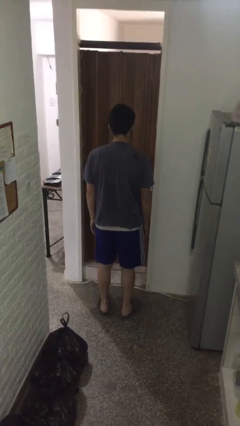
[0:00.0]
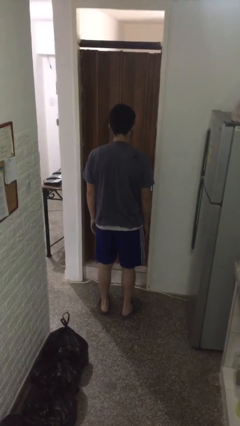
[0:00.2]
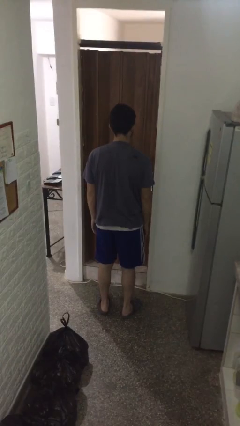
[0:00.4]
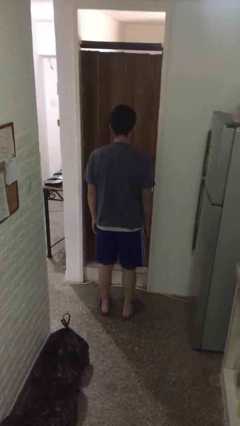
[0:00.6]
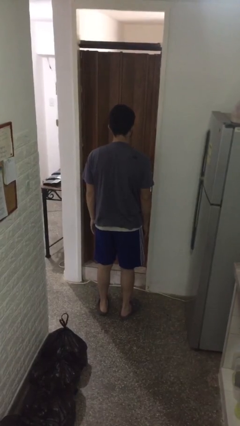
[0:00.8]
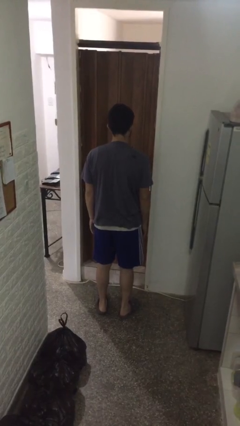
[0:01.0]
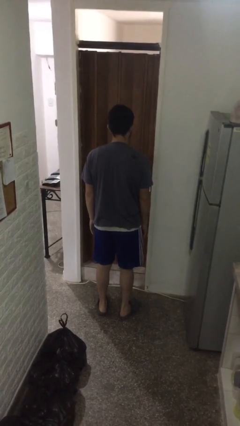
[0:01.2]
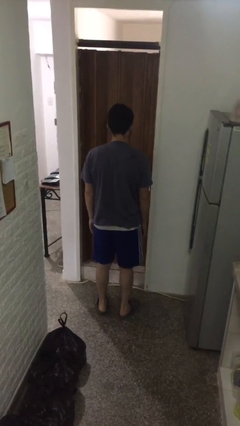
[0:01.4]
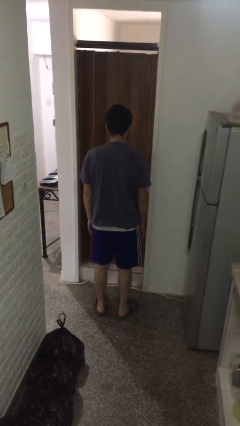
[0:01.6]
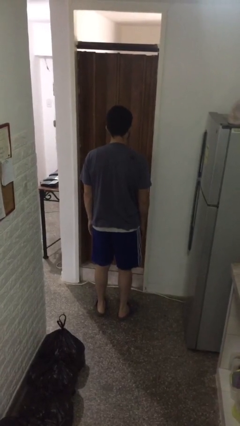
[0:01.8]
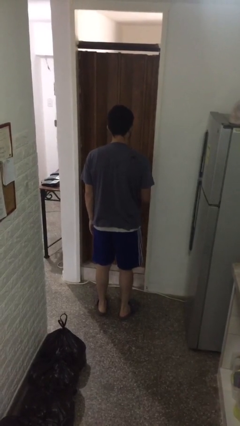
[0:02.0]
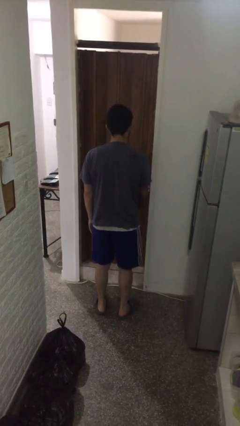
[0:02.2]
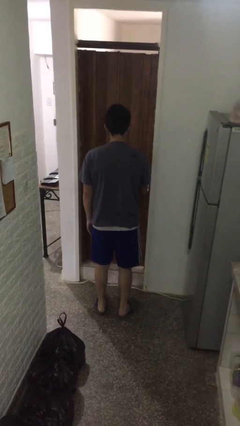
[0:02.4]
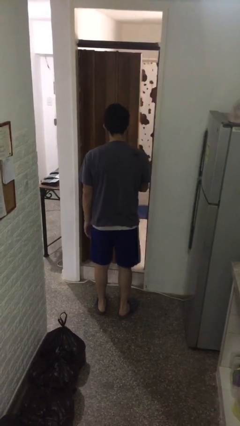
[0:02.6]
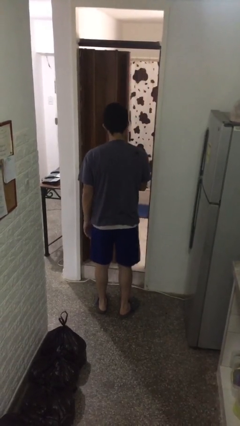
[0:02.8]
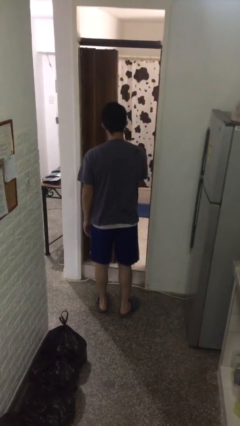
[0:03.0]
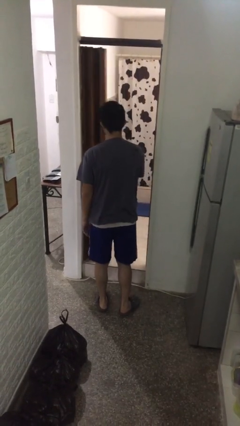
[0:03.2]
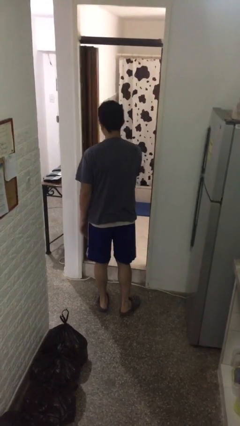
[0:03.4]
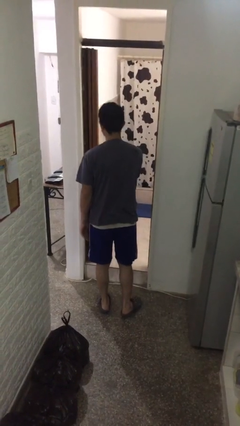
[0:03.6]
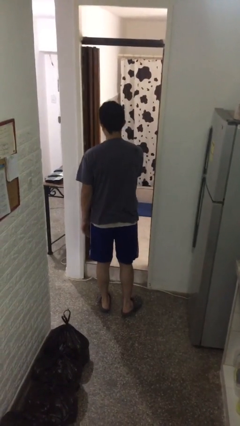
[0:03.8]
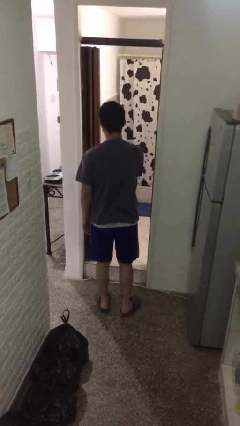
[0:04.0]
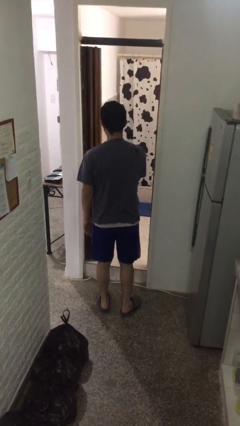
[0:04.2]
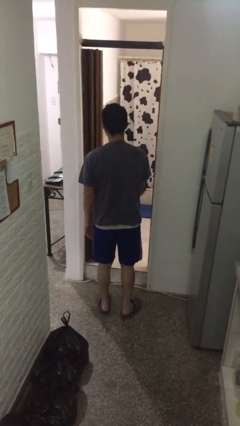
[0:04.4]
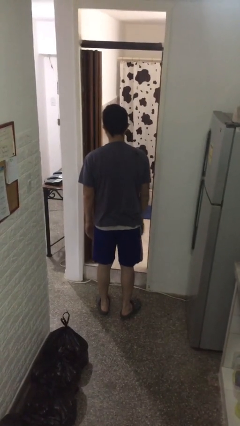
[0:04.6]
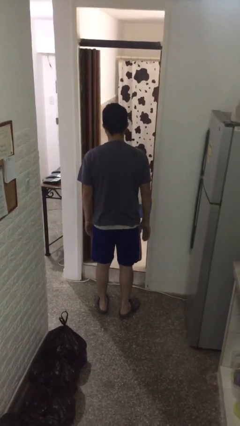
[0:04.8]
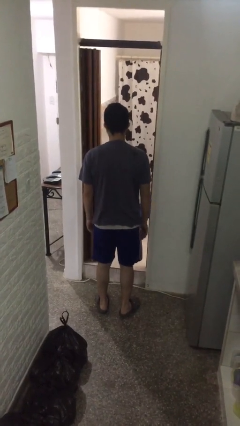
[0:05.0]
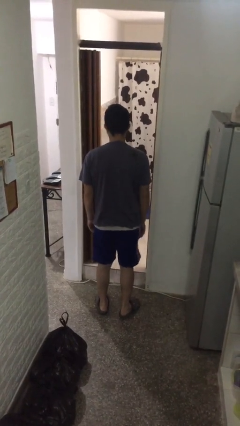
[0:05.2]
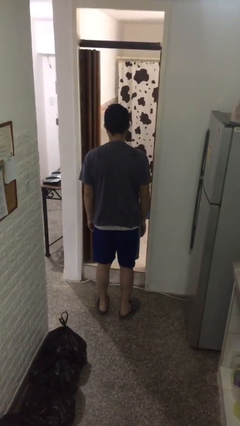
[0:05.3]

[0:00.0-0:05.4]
person opens sliding door

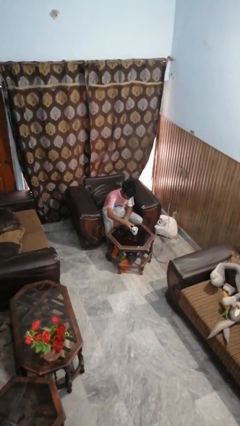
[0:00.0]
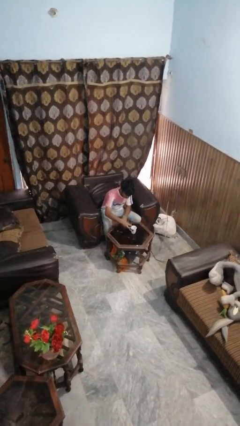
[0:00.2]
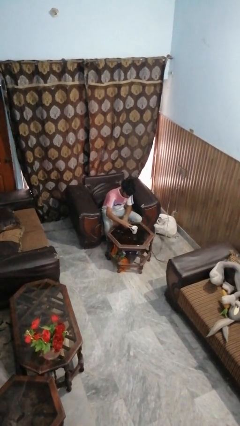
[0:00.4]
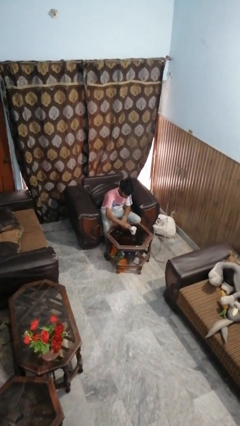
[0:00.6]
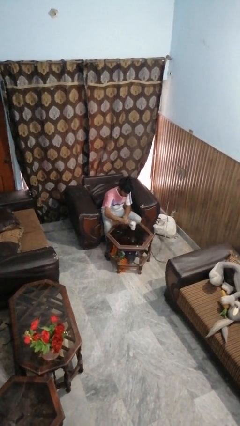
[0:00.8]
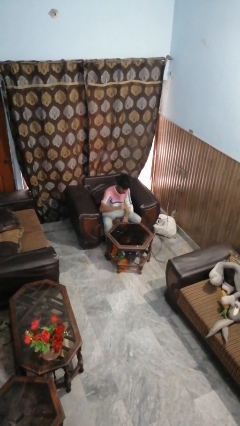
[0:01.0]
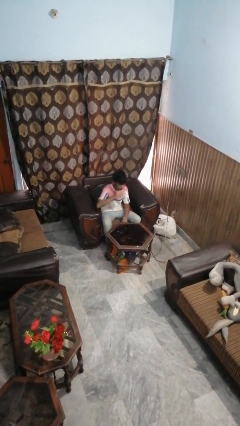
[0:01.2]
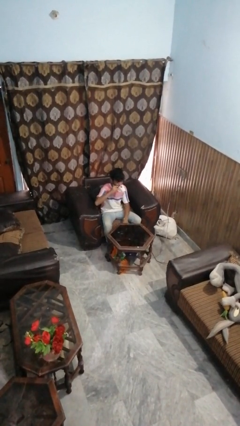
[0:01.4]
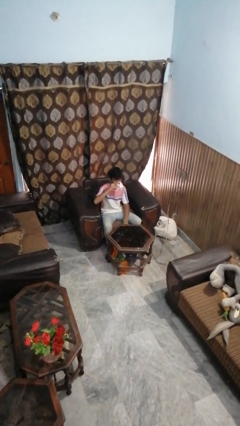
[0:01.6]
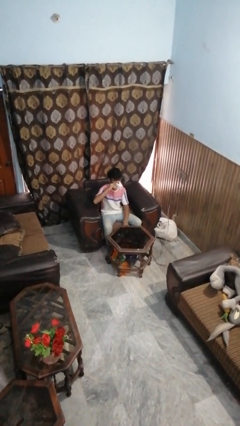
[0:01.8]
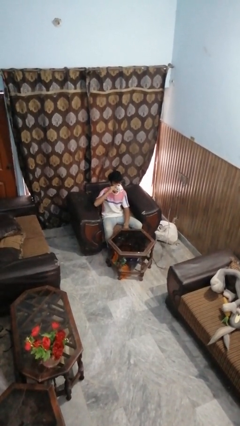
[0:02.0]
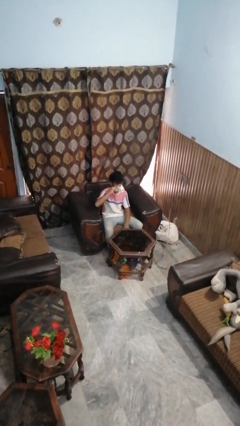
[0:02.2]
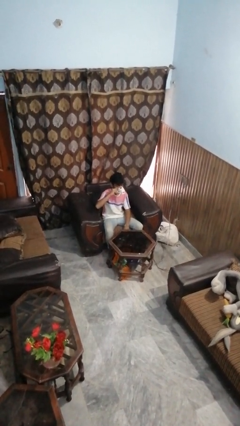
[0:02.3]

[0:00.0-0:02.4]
person drinks from mug

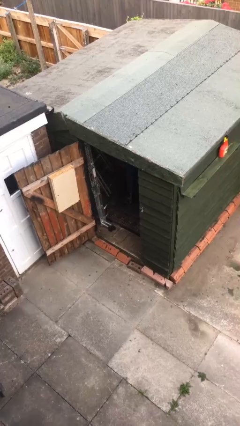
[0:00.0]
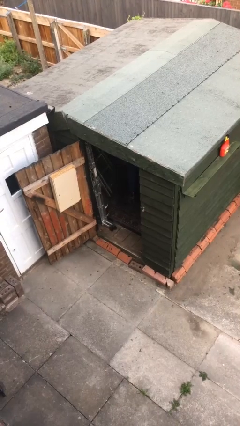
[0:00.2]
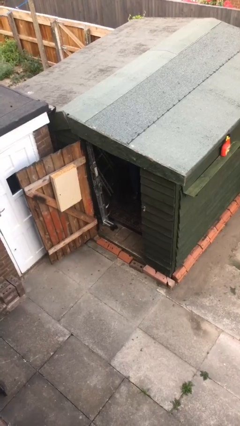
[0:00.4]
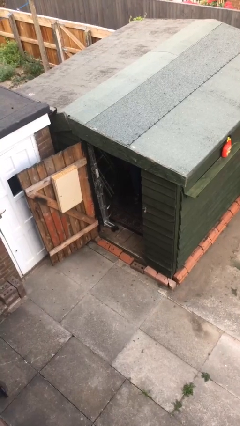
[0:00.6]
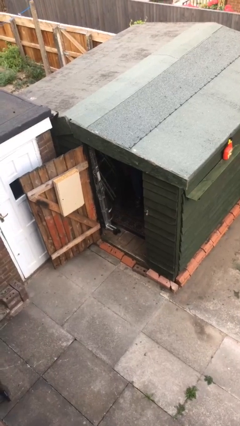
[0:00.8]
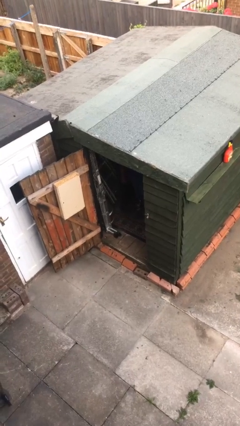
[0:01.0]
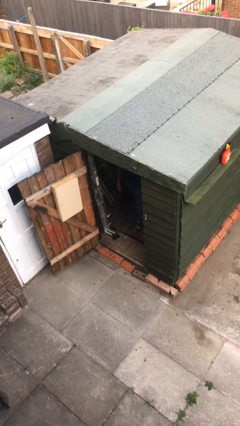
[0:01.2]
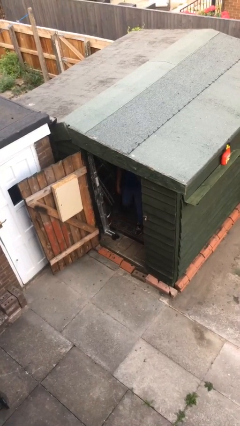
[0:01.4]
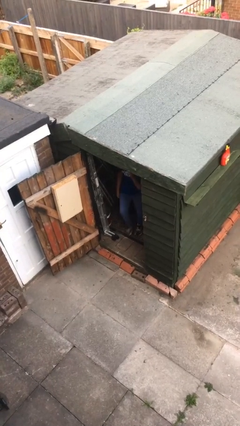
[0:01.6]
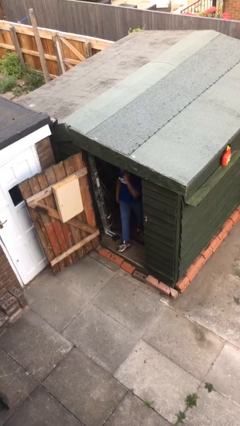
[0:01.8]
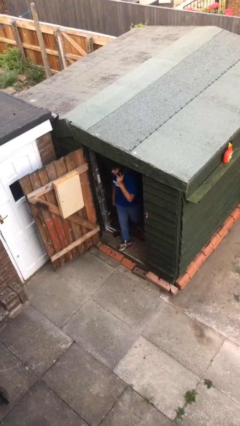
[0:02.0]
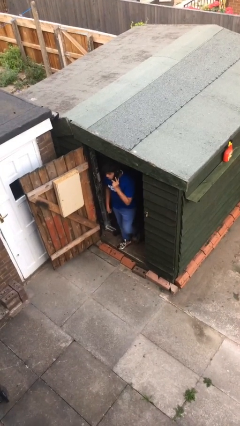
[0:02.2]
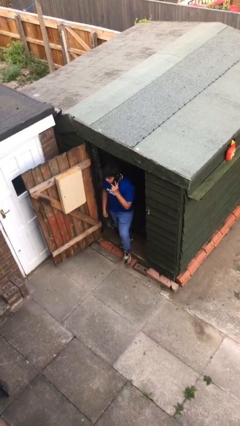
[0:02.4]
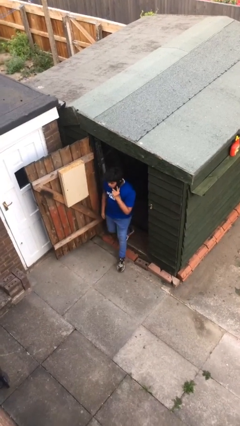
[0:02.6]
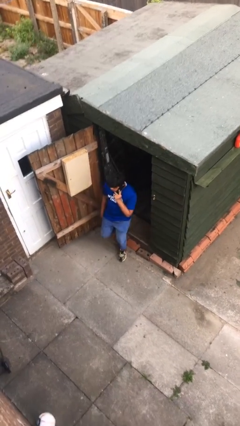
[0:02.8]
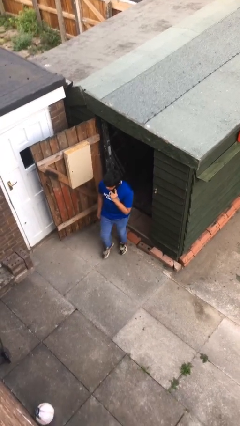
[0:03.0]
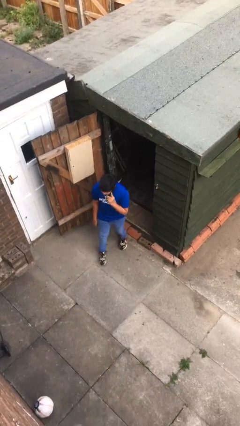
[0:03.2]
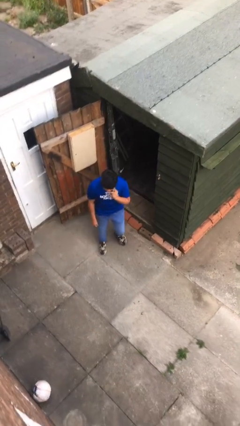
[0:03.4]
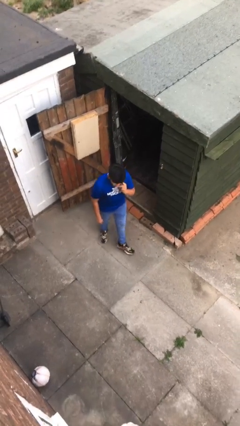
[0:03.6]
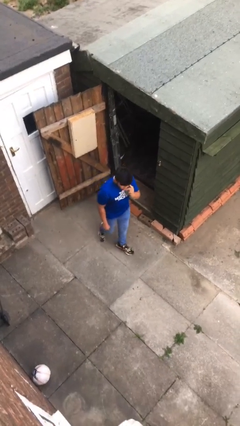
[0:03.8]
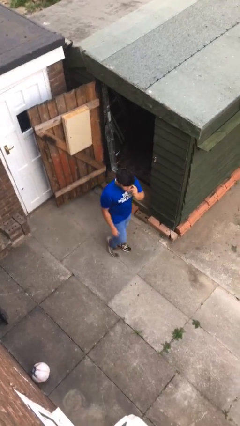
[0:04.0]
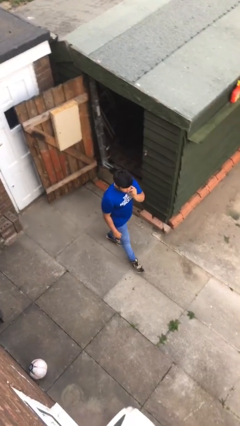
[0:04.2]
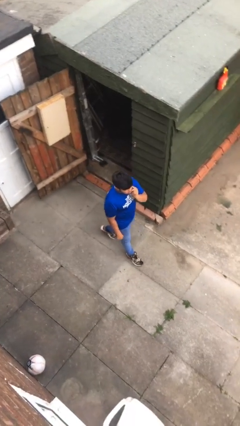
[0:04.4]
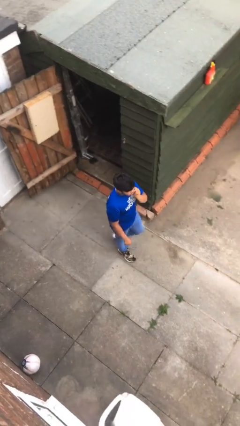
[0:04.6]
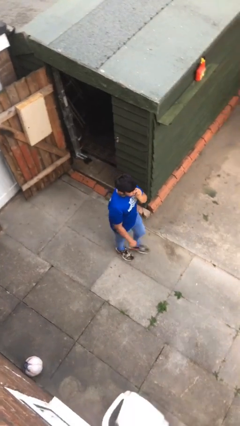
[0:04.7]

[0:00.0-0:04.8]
person enters scene through structure

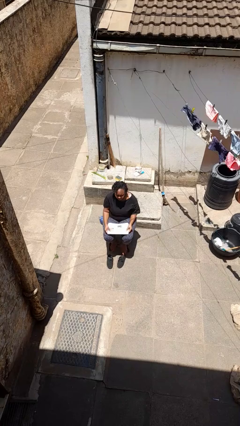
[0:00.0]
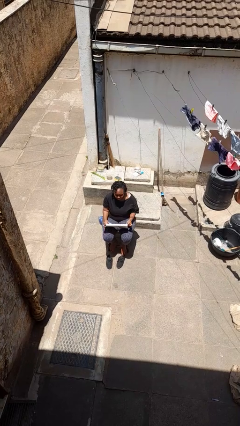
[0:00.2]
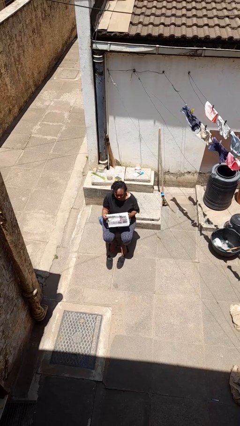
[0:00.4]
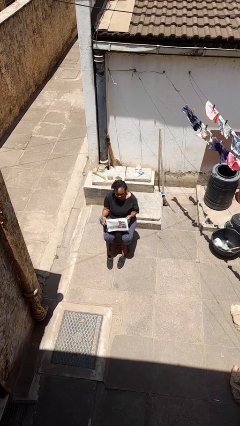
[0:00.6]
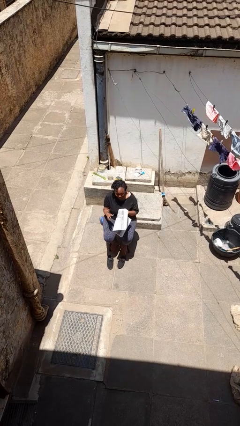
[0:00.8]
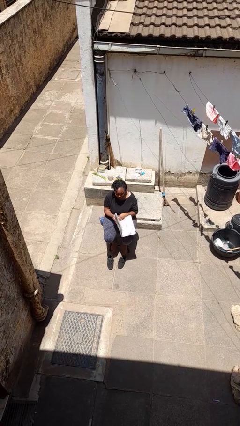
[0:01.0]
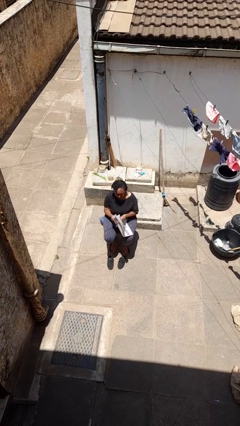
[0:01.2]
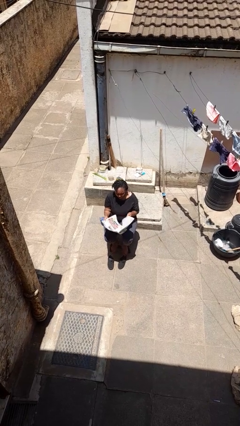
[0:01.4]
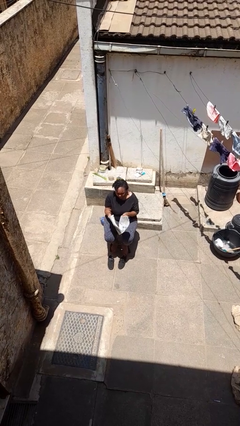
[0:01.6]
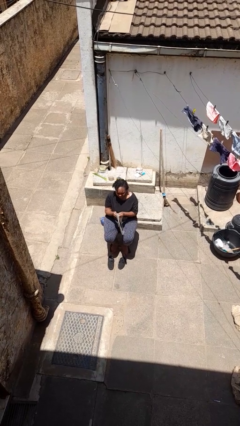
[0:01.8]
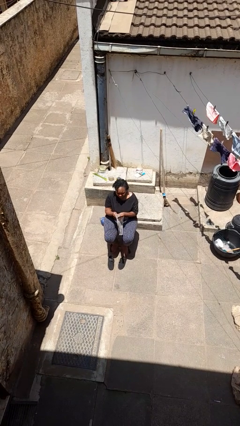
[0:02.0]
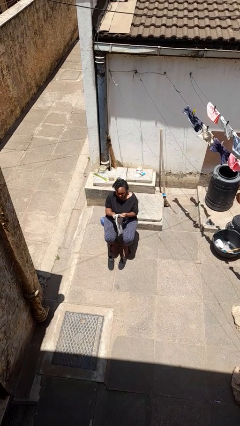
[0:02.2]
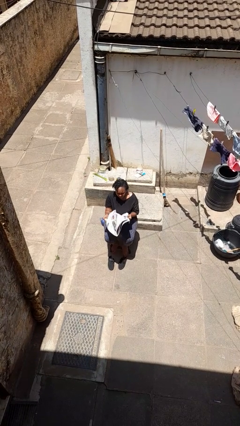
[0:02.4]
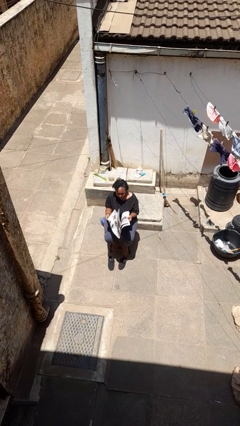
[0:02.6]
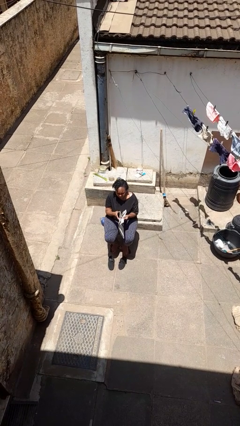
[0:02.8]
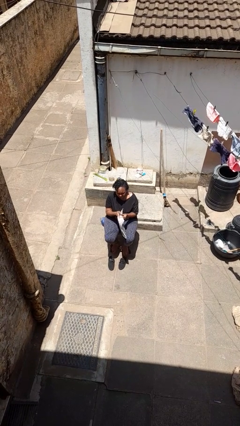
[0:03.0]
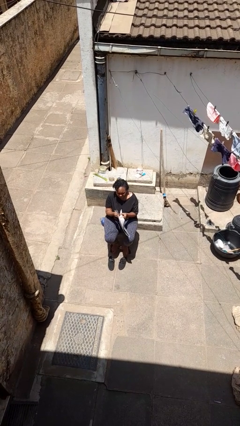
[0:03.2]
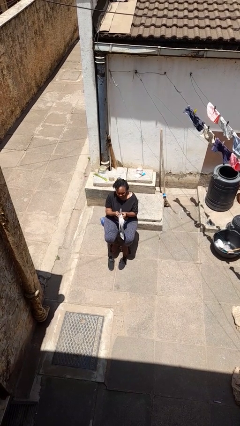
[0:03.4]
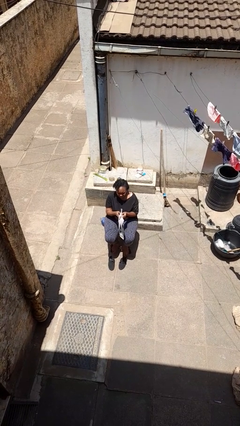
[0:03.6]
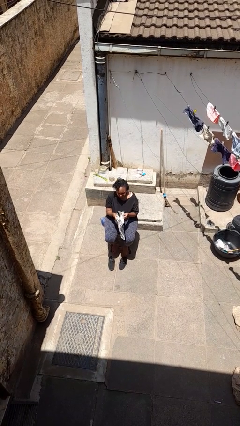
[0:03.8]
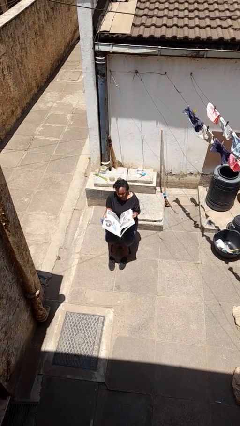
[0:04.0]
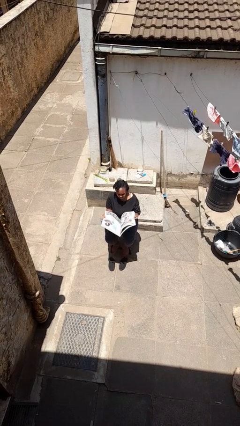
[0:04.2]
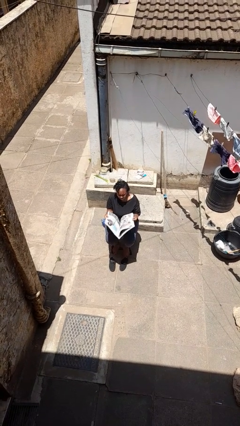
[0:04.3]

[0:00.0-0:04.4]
person reads newspaper

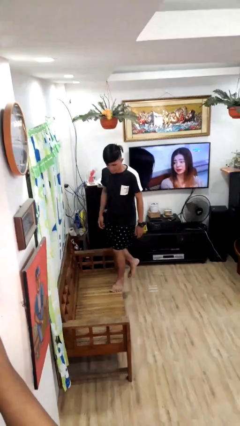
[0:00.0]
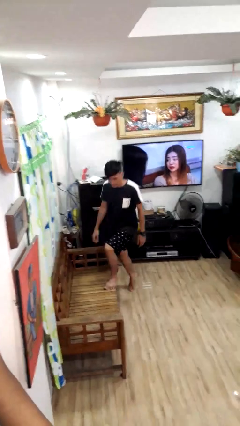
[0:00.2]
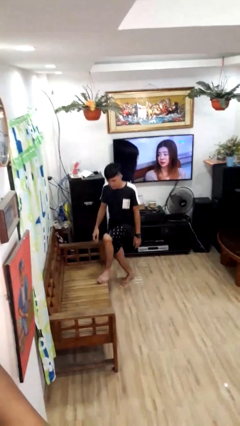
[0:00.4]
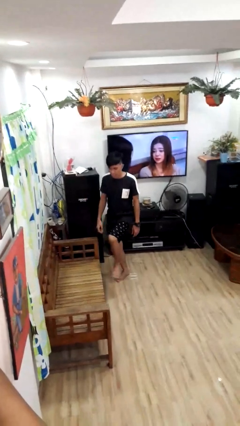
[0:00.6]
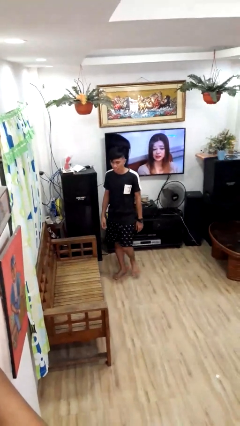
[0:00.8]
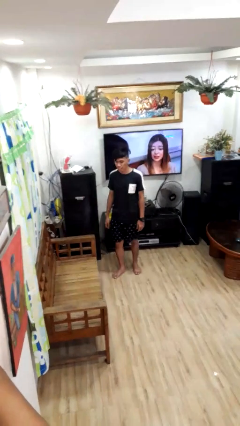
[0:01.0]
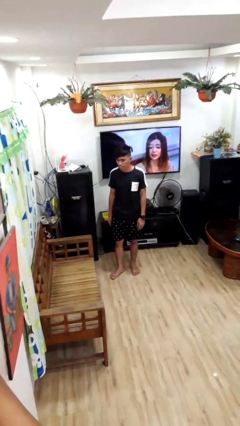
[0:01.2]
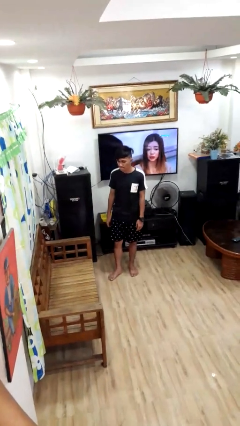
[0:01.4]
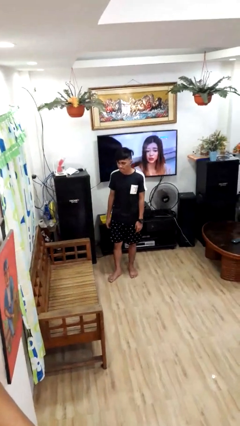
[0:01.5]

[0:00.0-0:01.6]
person climbs off couch
